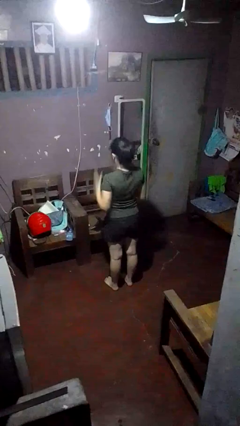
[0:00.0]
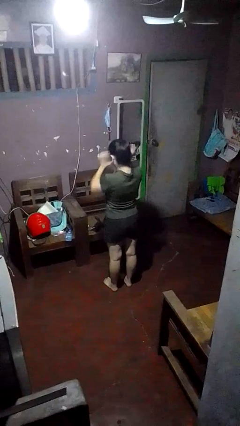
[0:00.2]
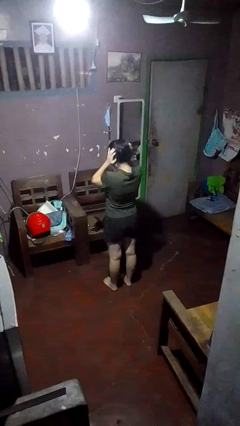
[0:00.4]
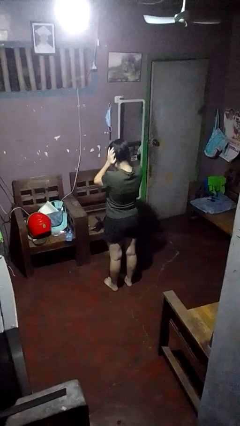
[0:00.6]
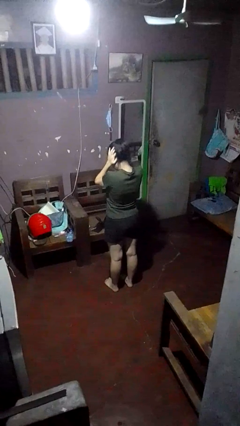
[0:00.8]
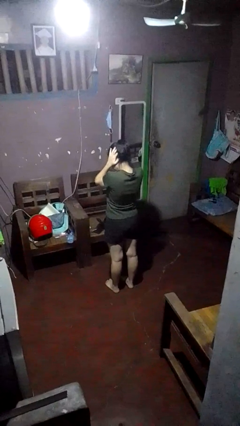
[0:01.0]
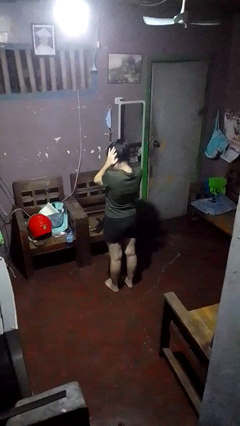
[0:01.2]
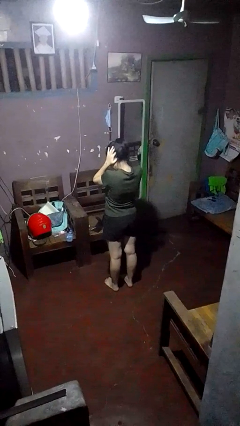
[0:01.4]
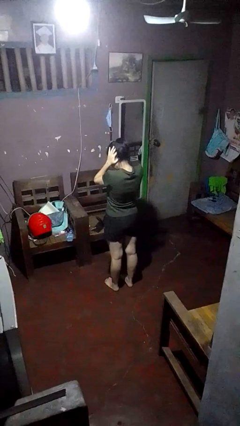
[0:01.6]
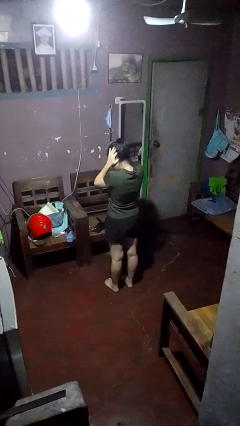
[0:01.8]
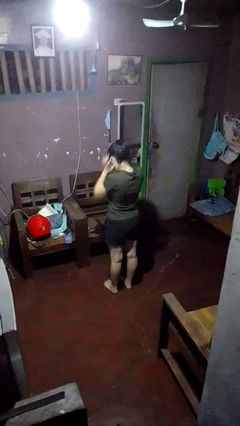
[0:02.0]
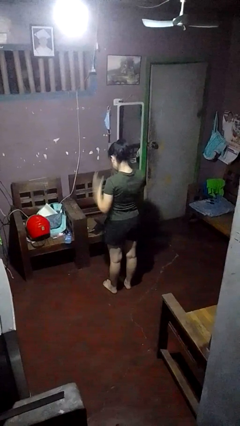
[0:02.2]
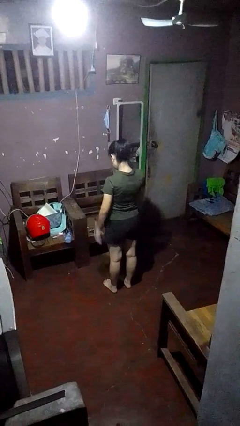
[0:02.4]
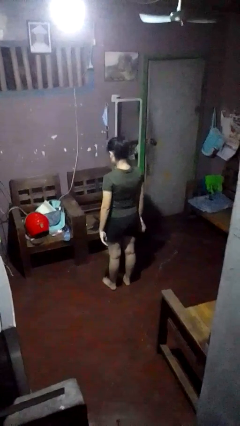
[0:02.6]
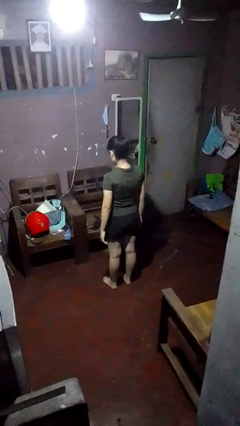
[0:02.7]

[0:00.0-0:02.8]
person puts fingers in ear

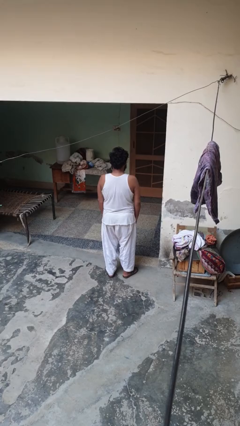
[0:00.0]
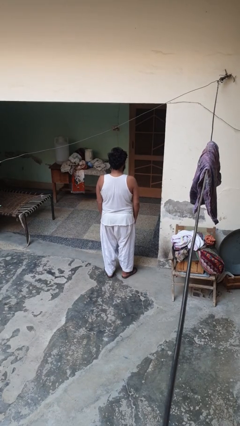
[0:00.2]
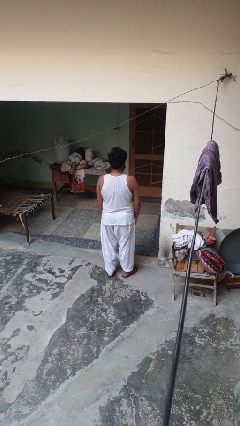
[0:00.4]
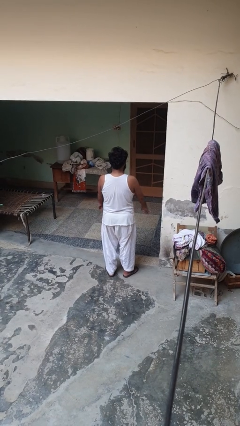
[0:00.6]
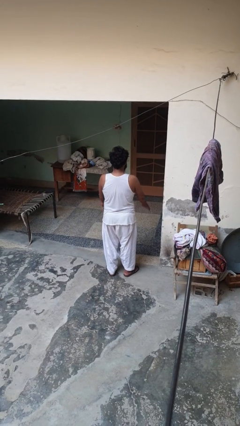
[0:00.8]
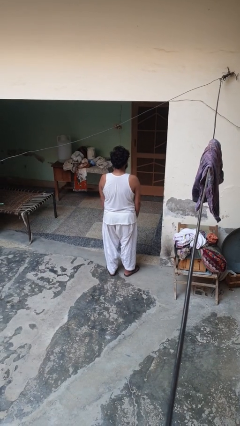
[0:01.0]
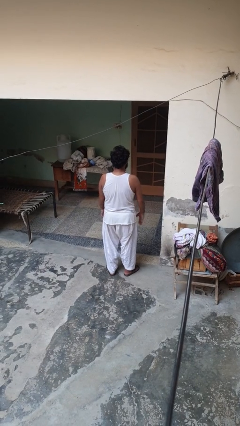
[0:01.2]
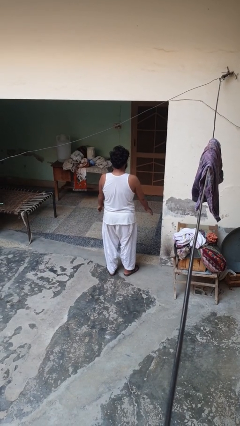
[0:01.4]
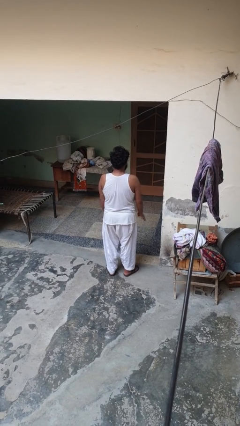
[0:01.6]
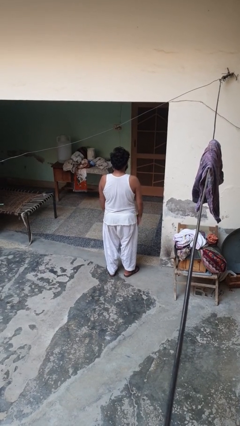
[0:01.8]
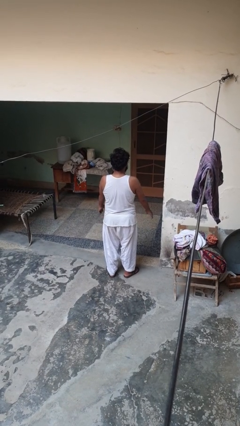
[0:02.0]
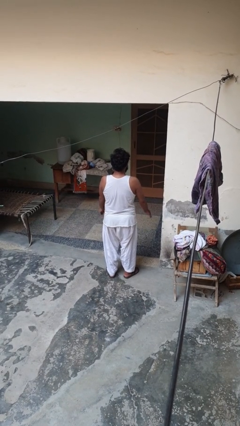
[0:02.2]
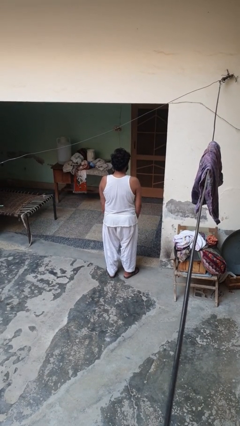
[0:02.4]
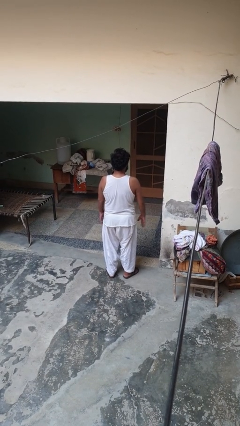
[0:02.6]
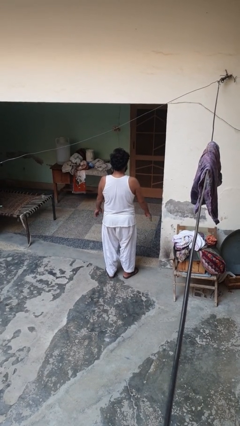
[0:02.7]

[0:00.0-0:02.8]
person slaps hands on thighs

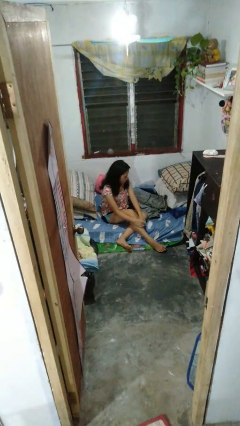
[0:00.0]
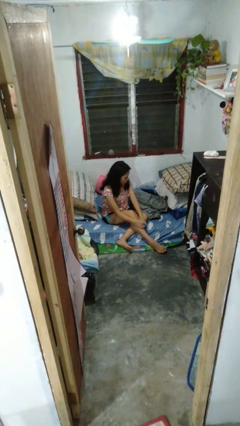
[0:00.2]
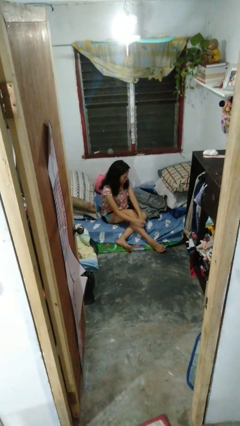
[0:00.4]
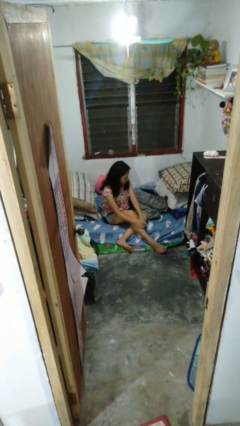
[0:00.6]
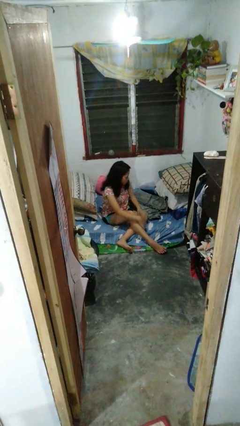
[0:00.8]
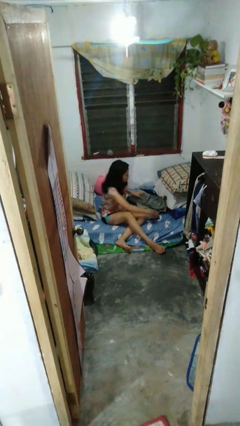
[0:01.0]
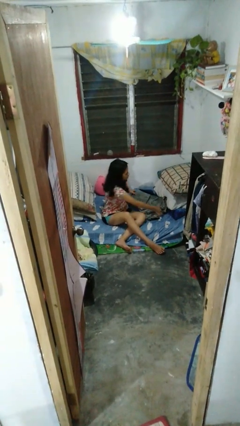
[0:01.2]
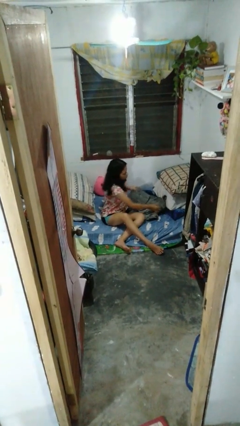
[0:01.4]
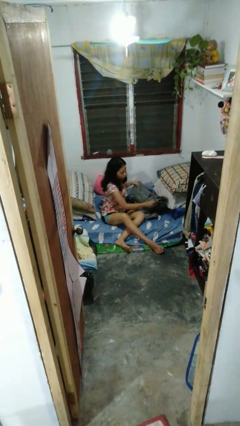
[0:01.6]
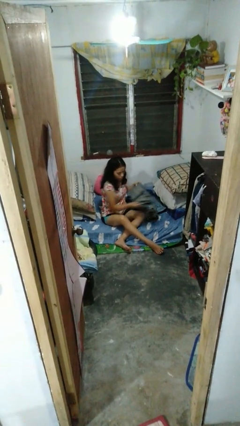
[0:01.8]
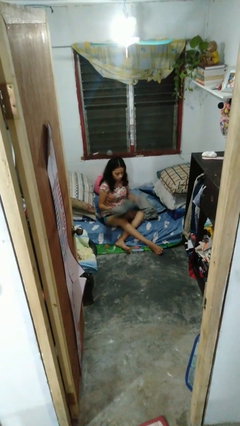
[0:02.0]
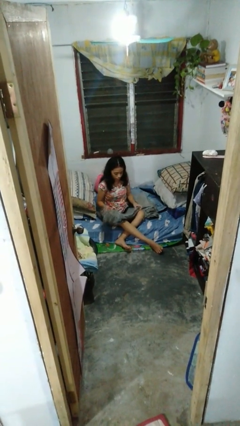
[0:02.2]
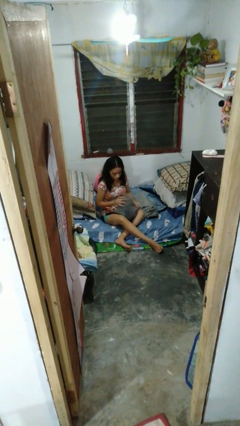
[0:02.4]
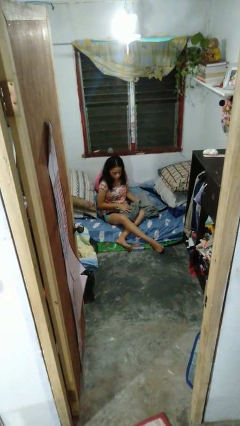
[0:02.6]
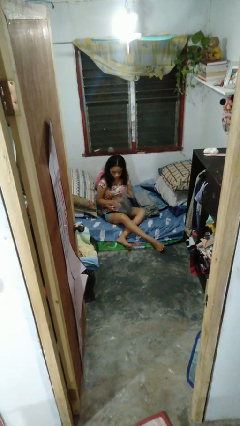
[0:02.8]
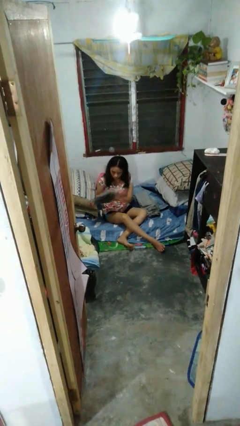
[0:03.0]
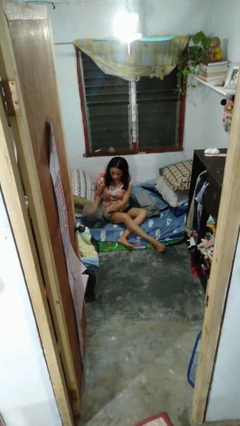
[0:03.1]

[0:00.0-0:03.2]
person folds pants

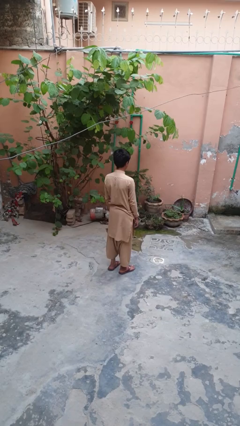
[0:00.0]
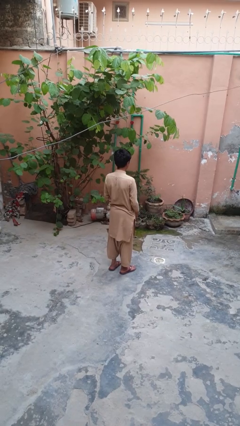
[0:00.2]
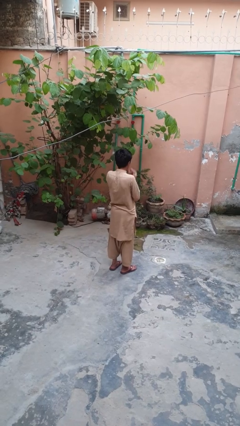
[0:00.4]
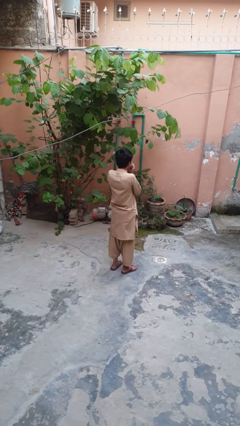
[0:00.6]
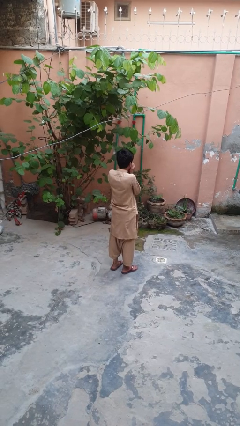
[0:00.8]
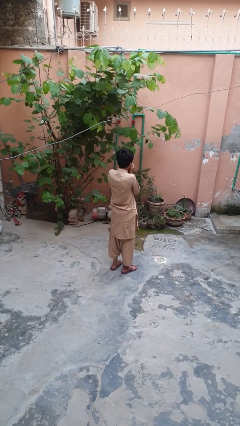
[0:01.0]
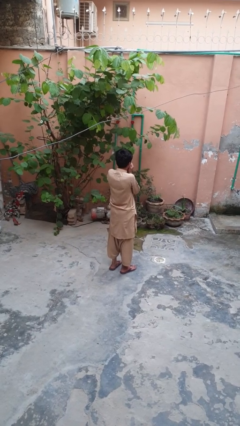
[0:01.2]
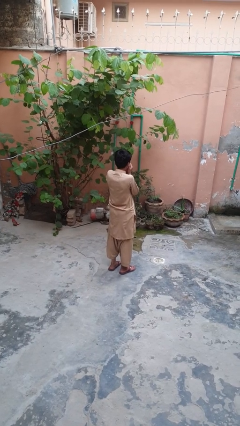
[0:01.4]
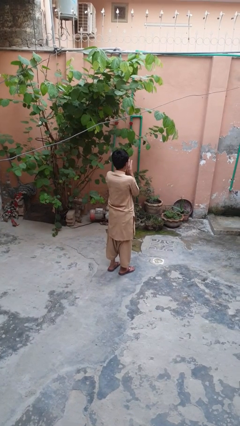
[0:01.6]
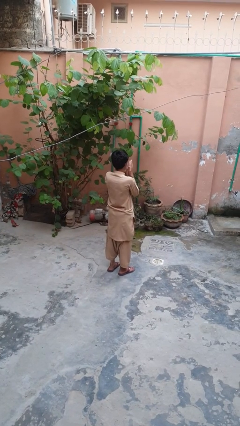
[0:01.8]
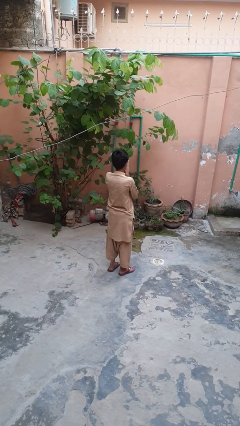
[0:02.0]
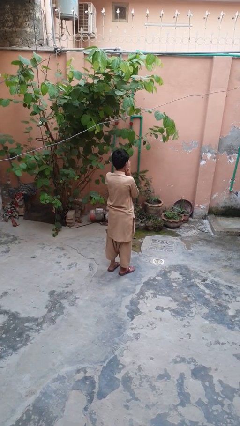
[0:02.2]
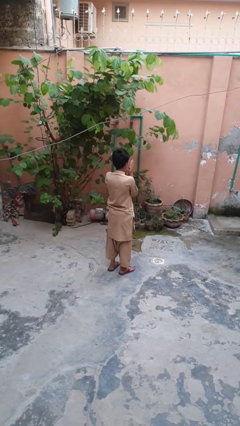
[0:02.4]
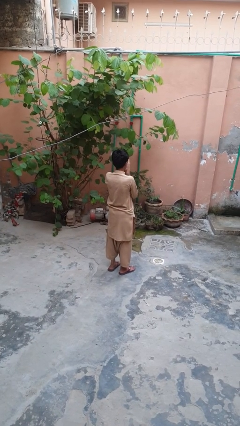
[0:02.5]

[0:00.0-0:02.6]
person blows into hands

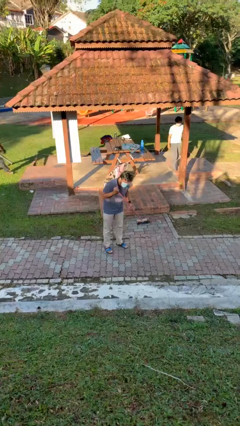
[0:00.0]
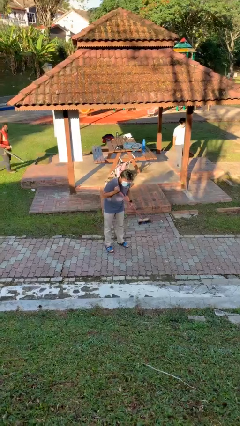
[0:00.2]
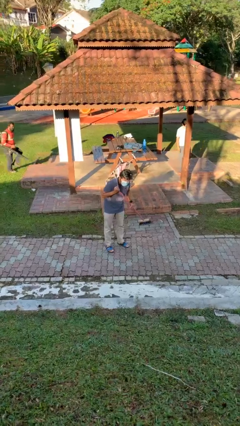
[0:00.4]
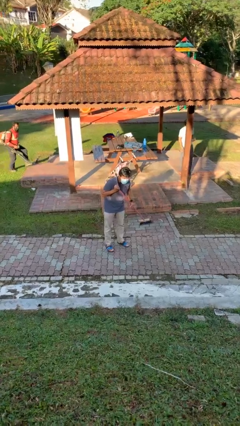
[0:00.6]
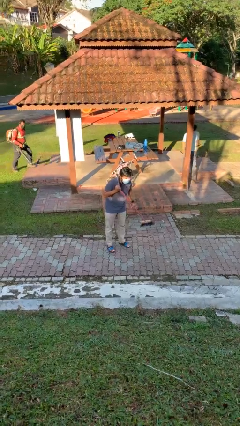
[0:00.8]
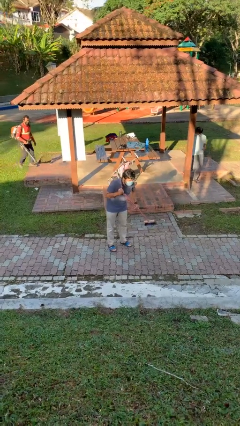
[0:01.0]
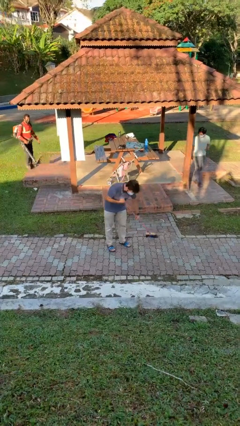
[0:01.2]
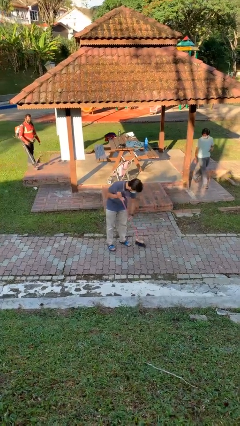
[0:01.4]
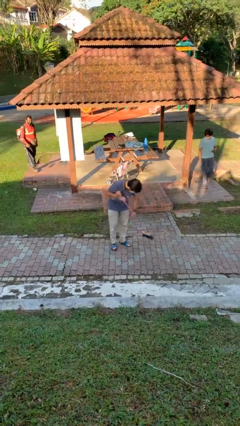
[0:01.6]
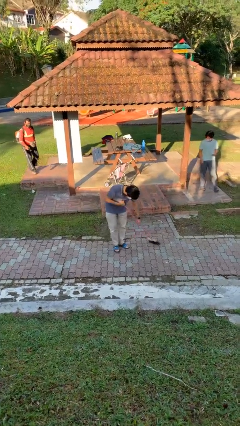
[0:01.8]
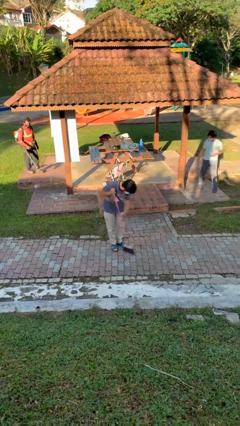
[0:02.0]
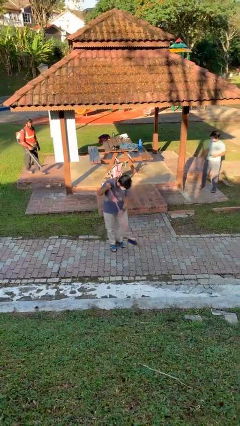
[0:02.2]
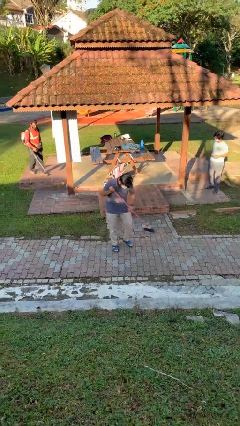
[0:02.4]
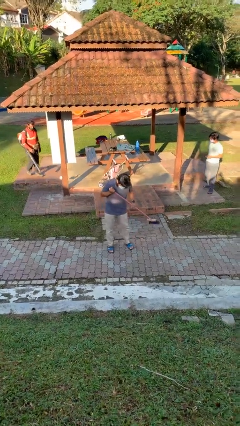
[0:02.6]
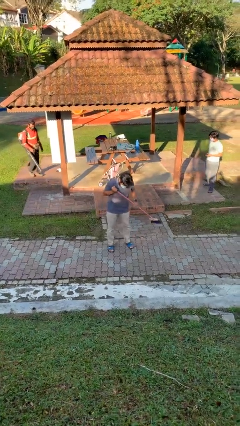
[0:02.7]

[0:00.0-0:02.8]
person sweeps floor

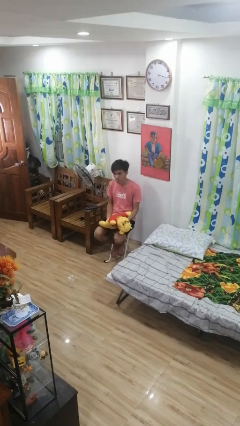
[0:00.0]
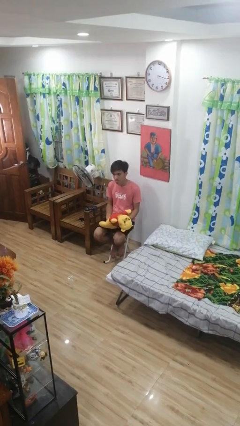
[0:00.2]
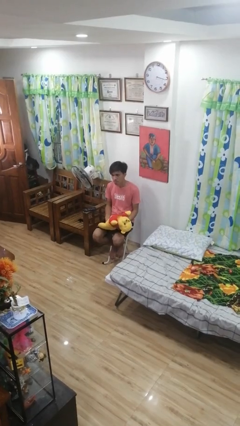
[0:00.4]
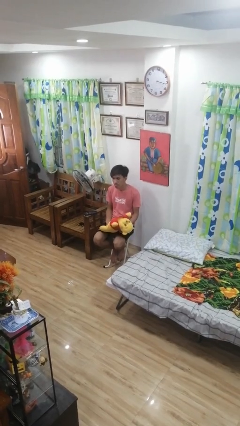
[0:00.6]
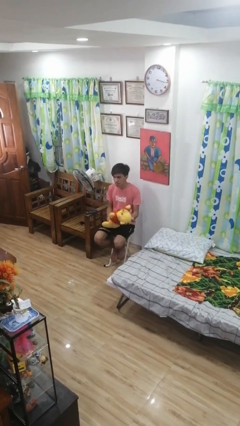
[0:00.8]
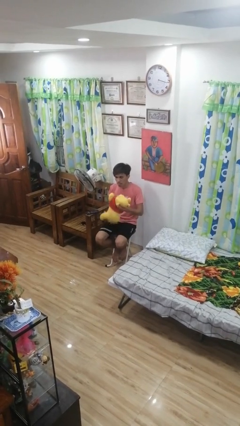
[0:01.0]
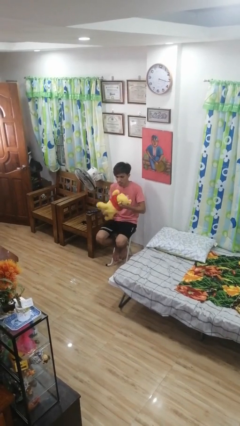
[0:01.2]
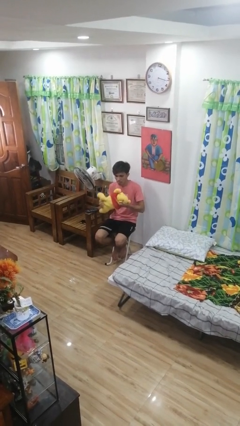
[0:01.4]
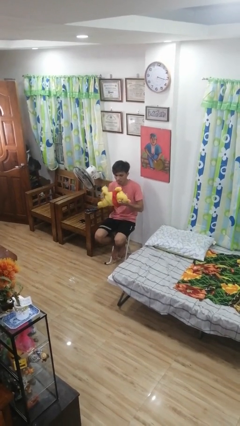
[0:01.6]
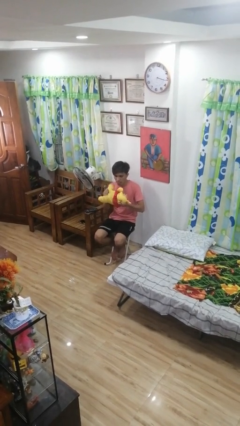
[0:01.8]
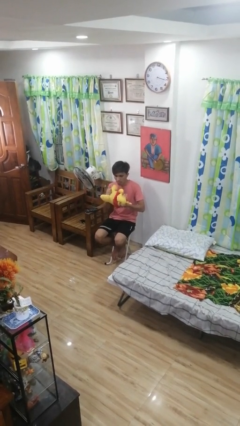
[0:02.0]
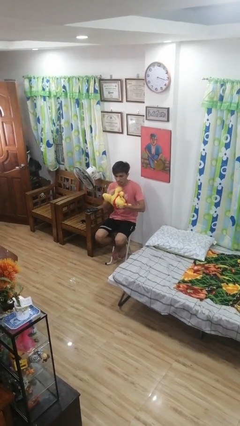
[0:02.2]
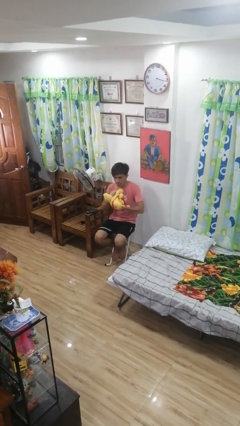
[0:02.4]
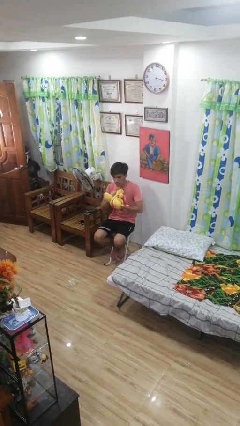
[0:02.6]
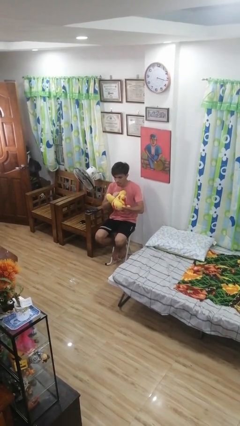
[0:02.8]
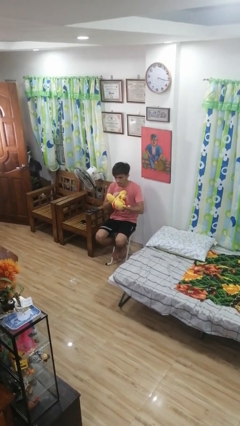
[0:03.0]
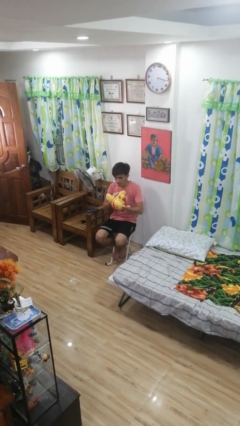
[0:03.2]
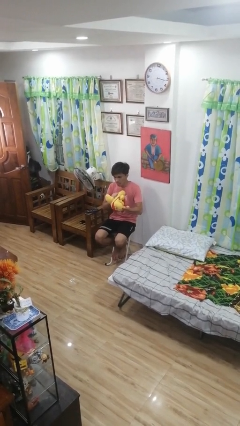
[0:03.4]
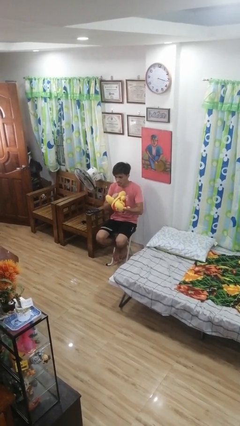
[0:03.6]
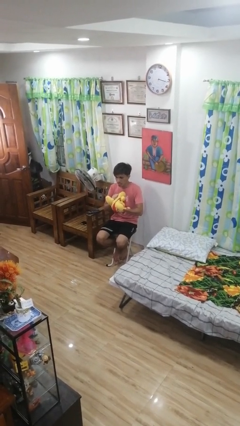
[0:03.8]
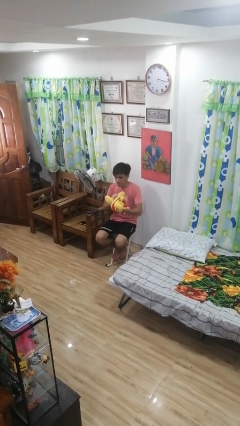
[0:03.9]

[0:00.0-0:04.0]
person squeezes object
